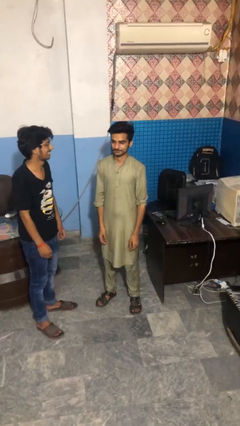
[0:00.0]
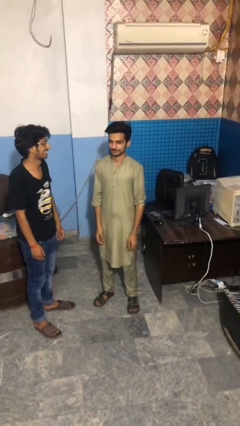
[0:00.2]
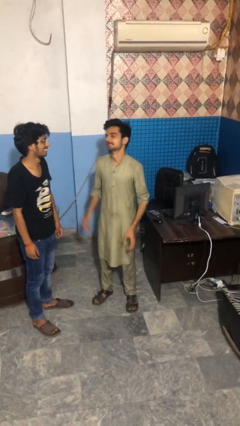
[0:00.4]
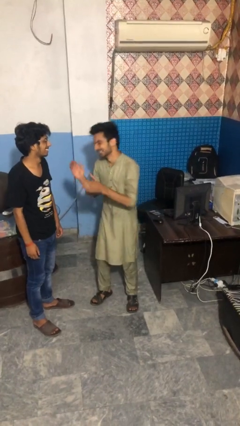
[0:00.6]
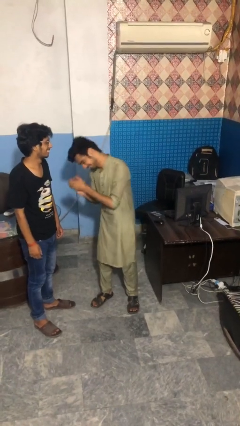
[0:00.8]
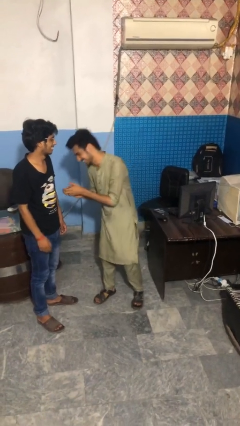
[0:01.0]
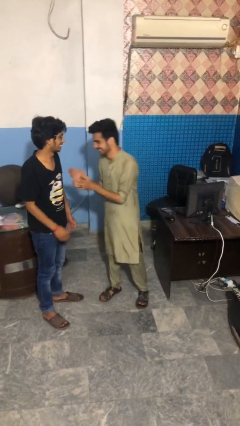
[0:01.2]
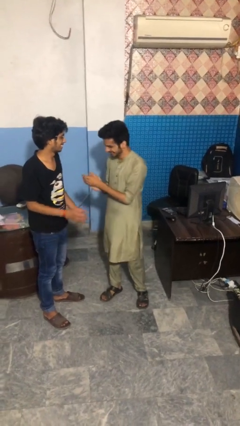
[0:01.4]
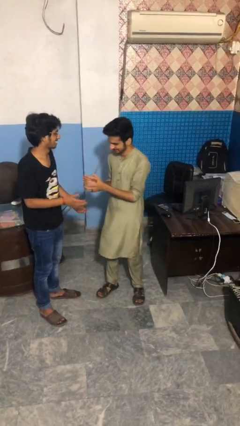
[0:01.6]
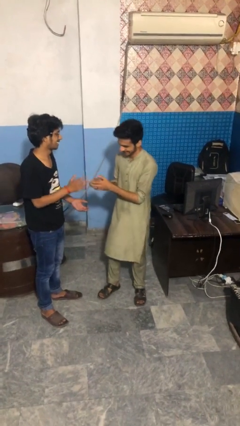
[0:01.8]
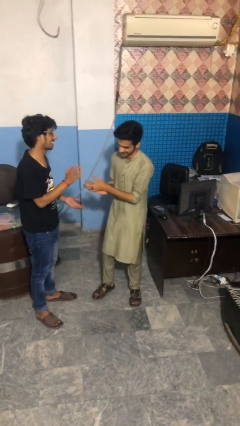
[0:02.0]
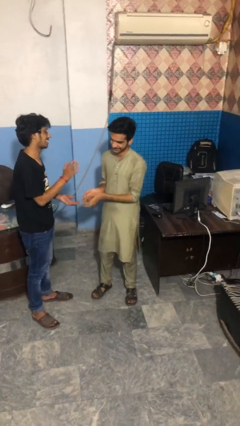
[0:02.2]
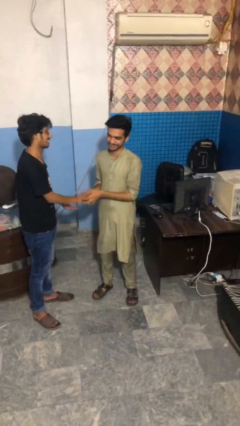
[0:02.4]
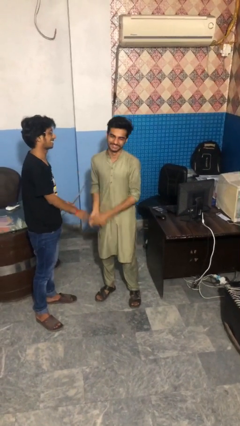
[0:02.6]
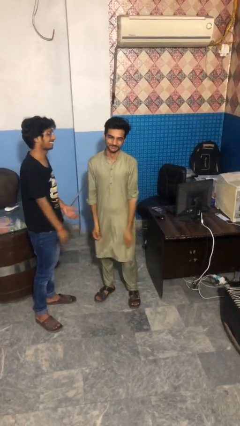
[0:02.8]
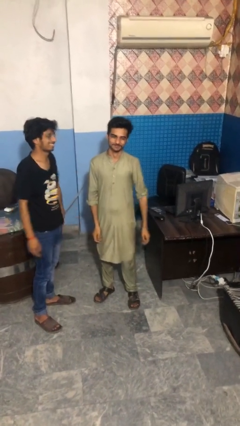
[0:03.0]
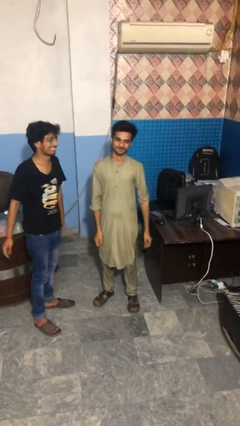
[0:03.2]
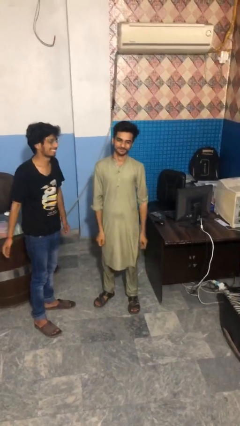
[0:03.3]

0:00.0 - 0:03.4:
person laughs with person

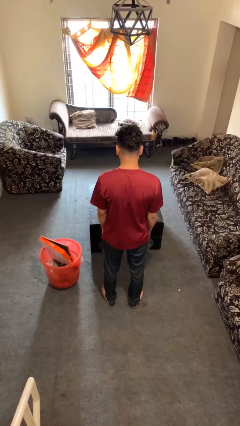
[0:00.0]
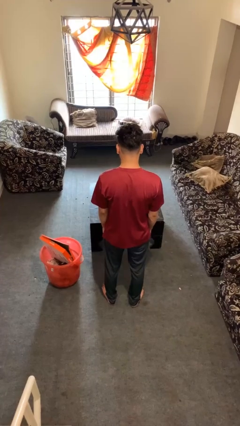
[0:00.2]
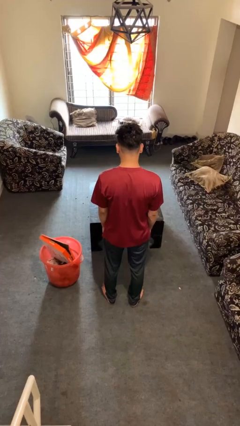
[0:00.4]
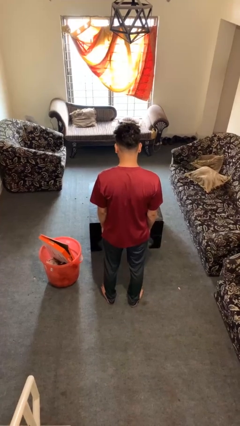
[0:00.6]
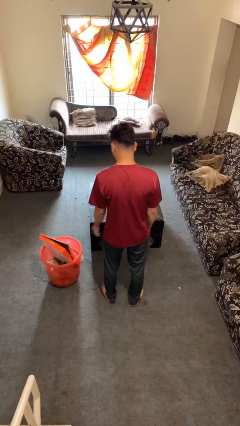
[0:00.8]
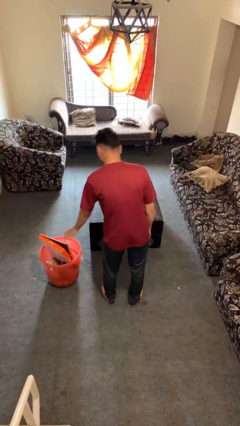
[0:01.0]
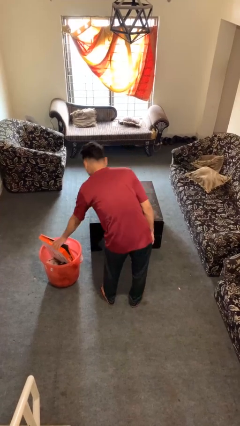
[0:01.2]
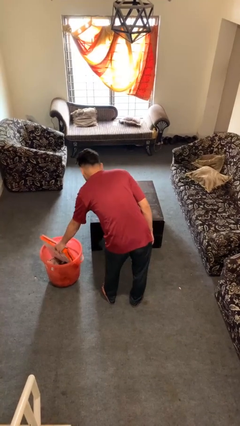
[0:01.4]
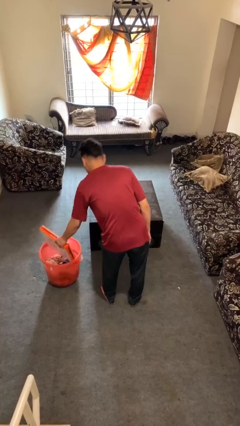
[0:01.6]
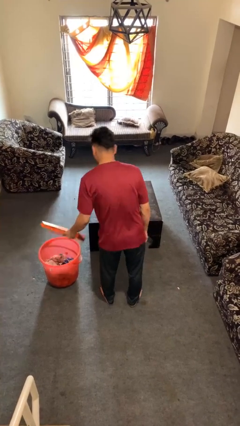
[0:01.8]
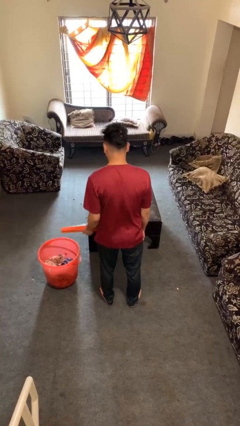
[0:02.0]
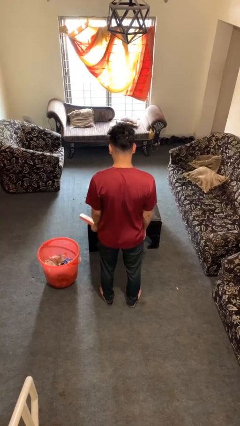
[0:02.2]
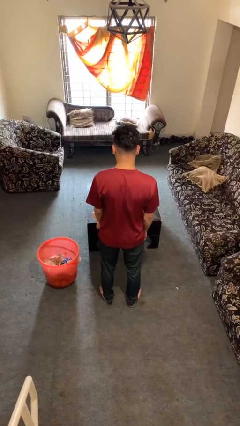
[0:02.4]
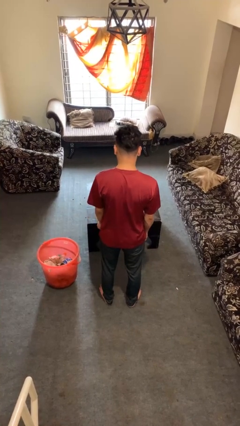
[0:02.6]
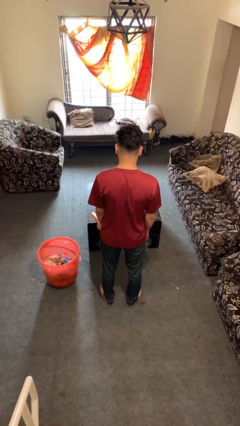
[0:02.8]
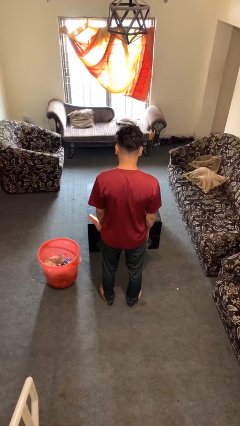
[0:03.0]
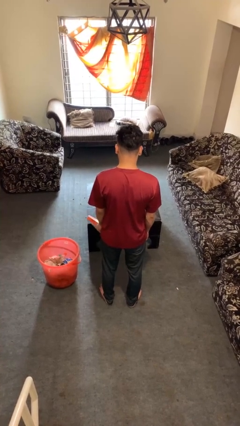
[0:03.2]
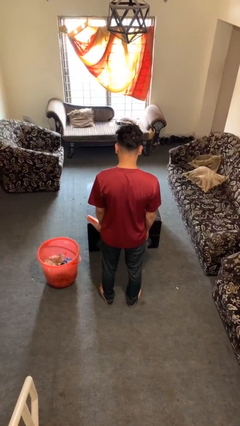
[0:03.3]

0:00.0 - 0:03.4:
person takes object from basket

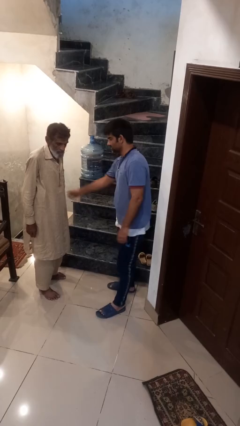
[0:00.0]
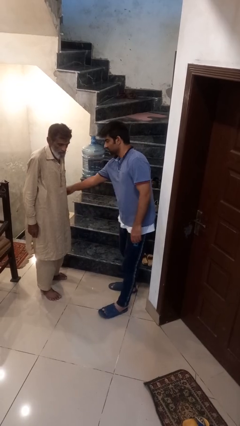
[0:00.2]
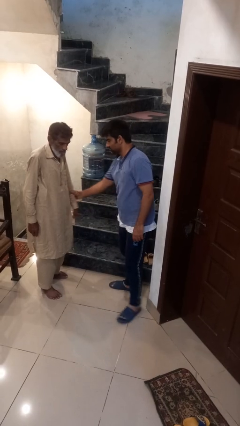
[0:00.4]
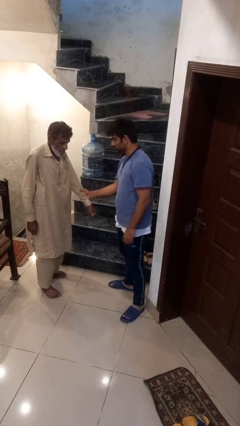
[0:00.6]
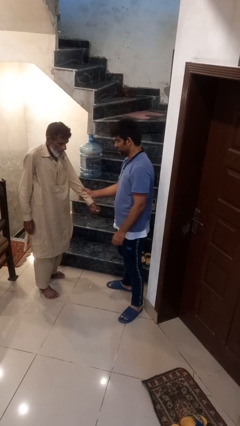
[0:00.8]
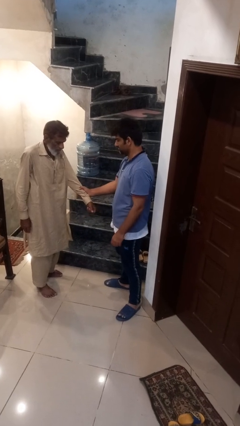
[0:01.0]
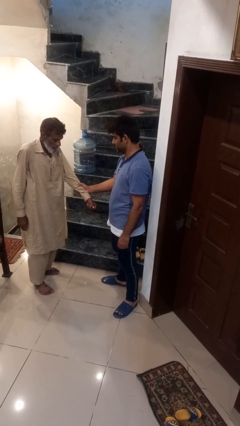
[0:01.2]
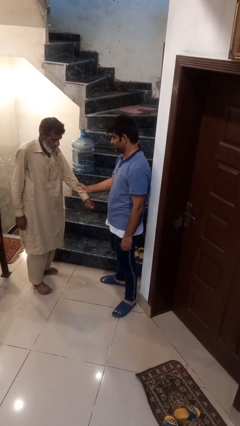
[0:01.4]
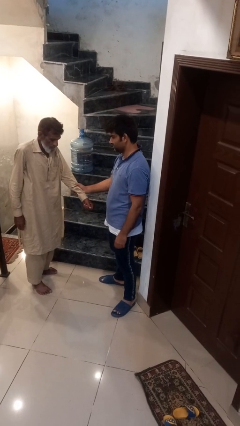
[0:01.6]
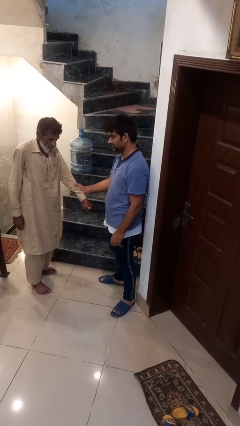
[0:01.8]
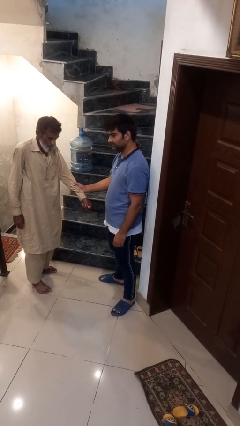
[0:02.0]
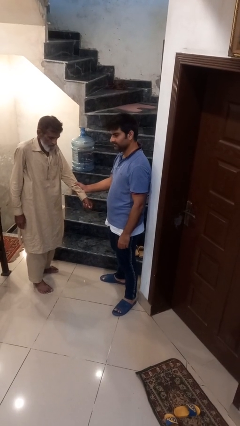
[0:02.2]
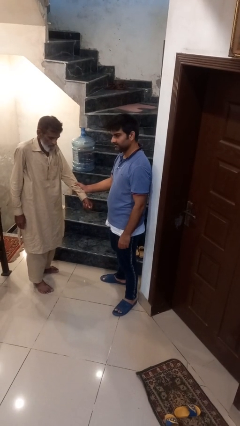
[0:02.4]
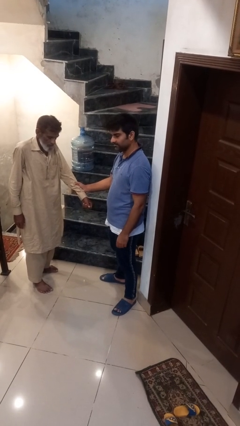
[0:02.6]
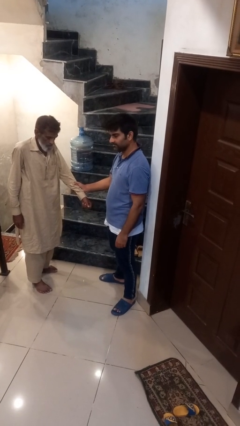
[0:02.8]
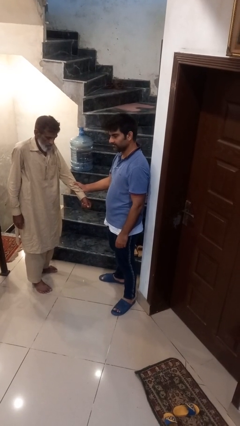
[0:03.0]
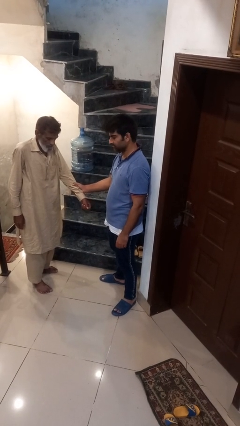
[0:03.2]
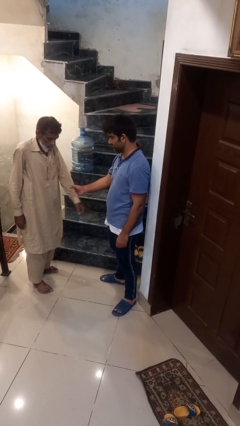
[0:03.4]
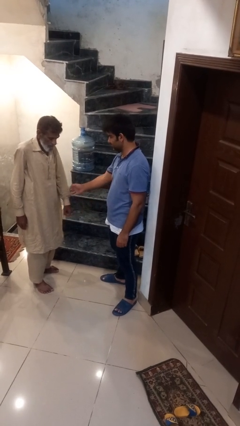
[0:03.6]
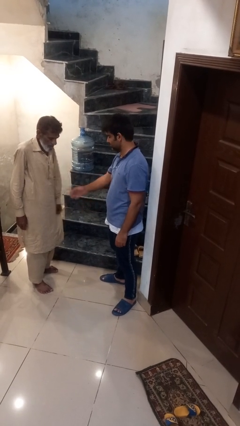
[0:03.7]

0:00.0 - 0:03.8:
person grabs person by forearm

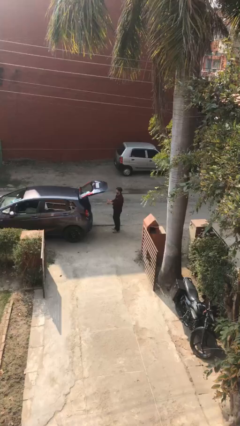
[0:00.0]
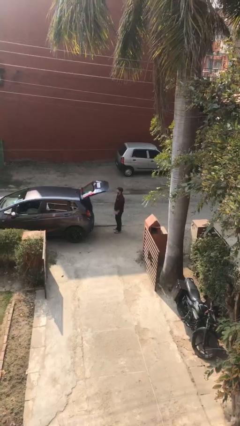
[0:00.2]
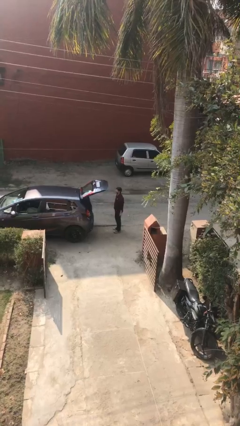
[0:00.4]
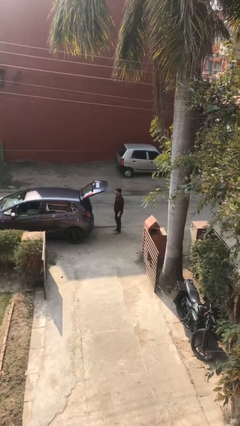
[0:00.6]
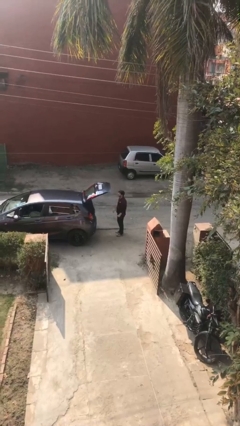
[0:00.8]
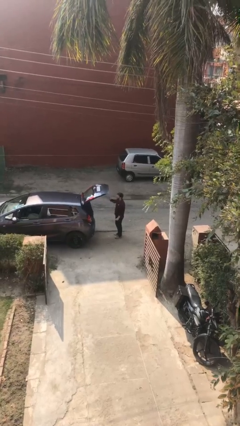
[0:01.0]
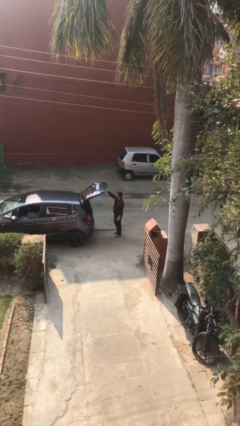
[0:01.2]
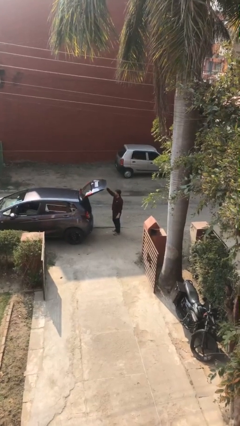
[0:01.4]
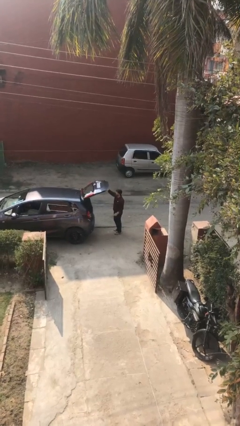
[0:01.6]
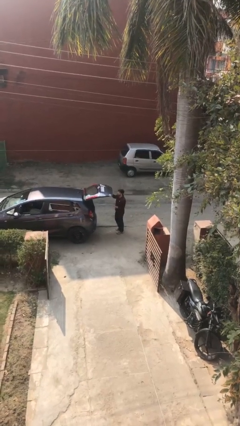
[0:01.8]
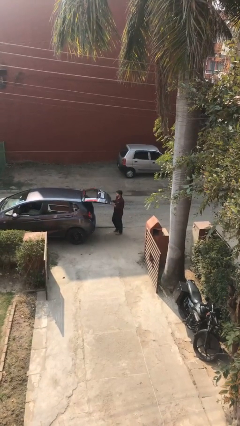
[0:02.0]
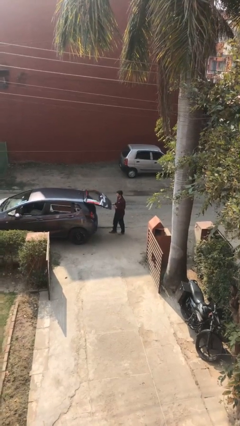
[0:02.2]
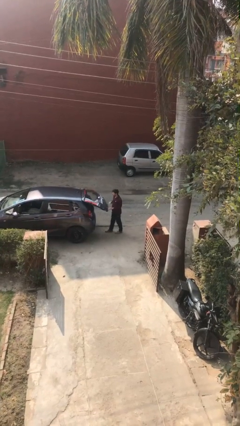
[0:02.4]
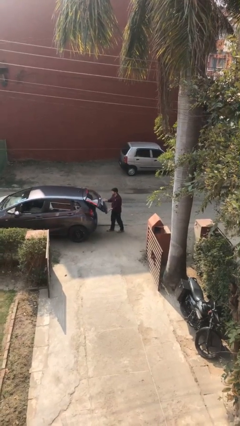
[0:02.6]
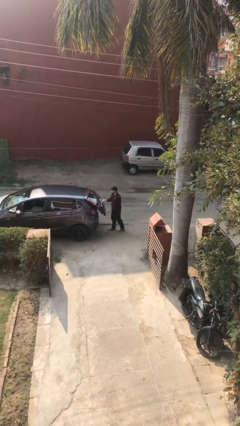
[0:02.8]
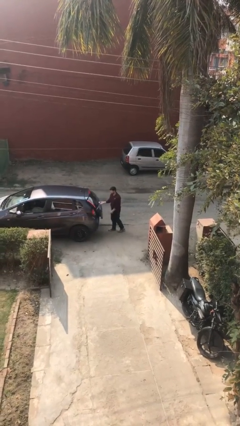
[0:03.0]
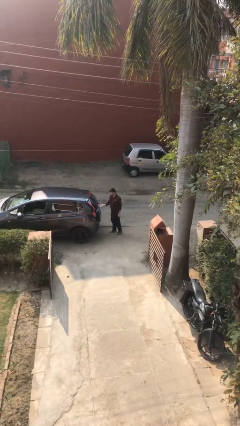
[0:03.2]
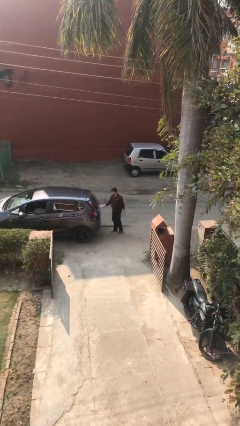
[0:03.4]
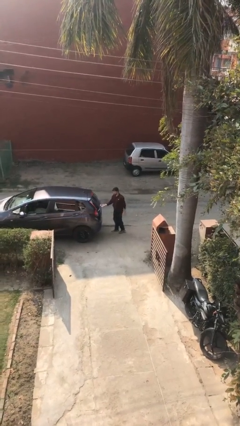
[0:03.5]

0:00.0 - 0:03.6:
person closes car trunk

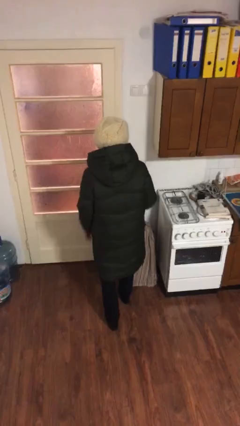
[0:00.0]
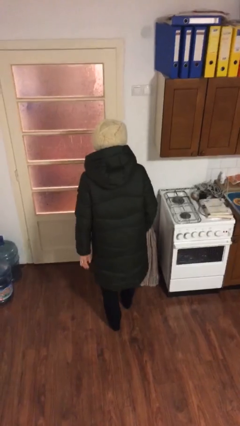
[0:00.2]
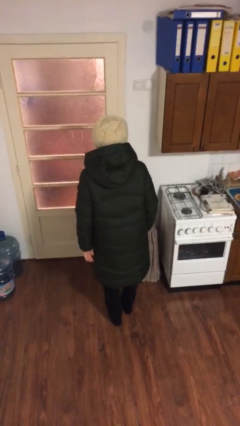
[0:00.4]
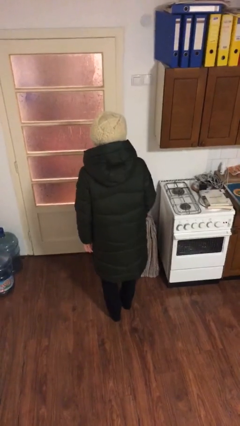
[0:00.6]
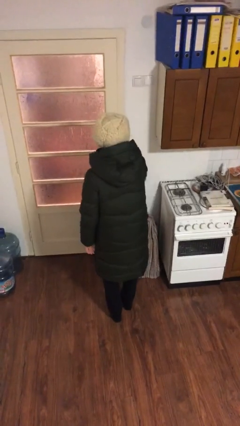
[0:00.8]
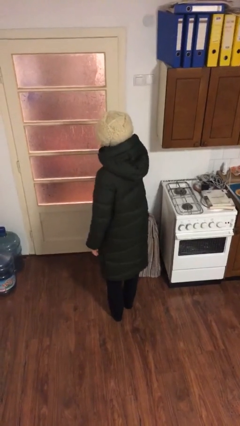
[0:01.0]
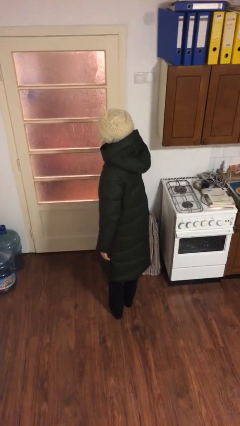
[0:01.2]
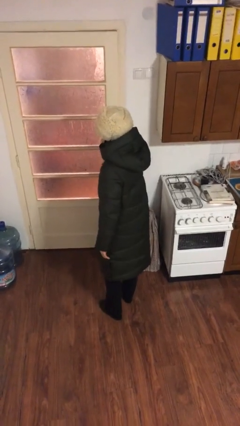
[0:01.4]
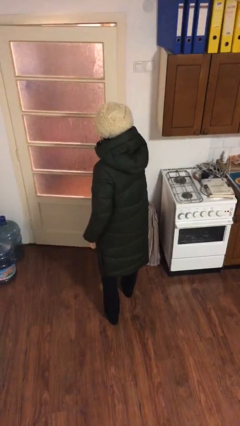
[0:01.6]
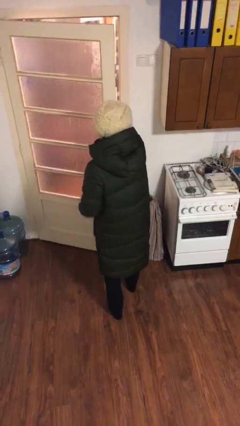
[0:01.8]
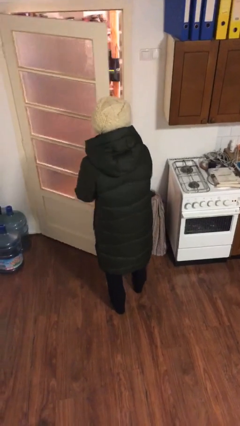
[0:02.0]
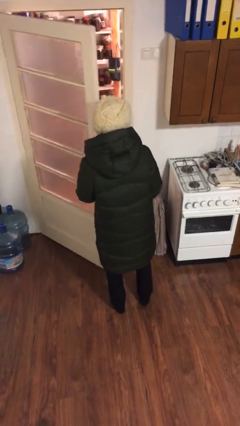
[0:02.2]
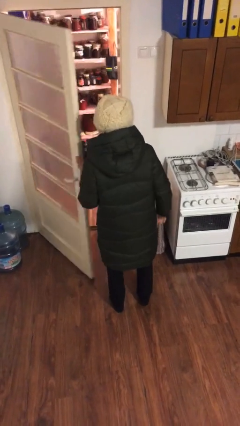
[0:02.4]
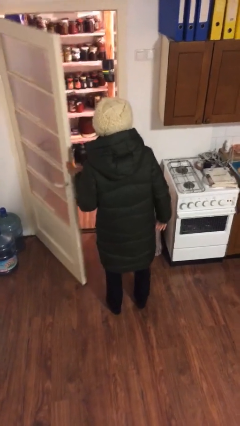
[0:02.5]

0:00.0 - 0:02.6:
person opens facility door

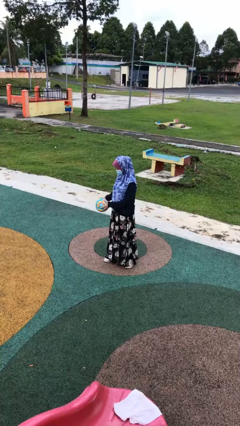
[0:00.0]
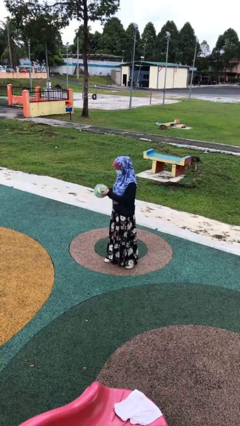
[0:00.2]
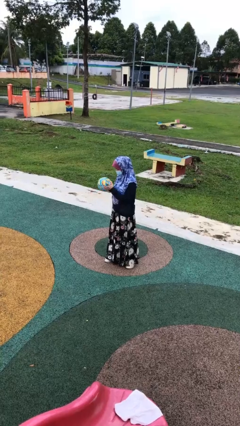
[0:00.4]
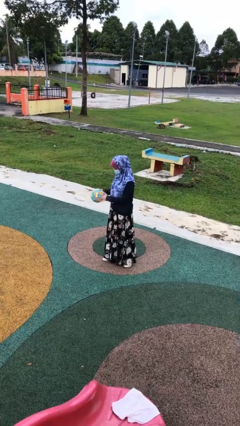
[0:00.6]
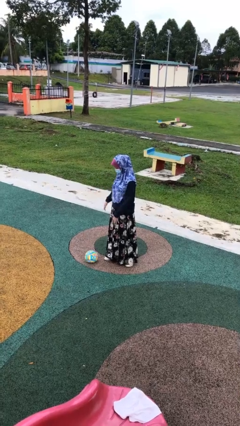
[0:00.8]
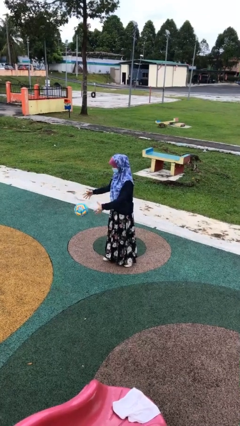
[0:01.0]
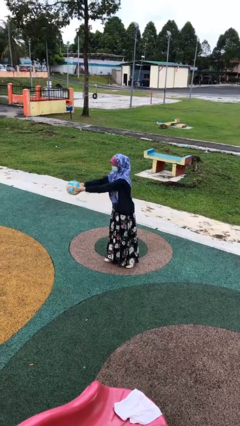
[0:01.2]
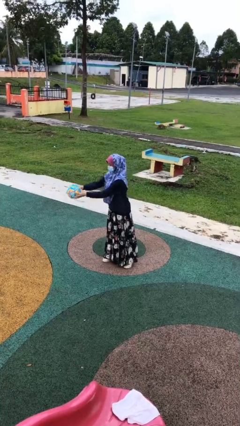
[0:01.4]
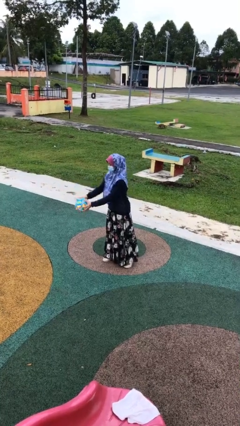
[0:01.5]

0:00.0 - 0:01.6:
person bounces ball on floor
